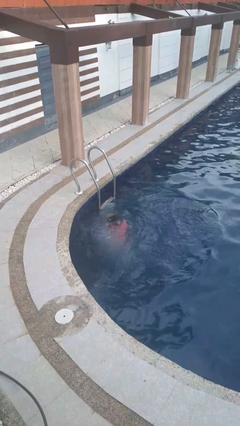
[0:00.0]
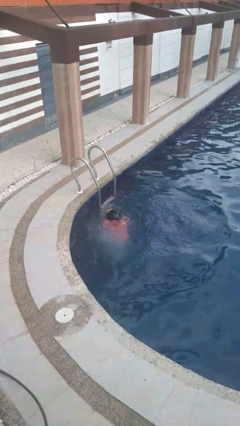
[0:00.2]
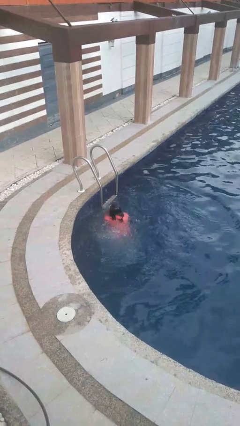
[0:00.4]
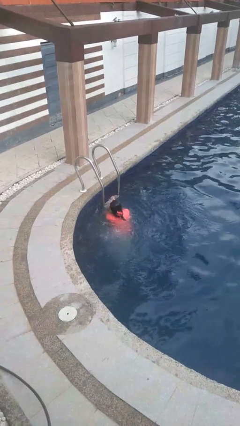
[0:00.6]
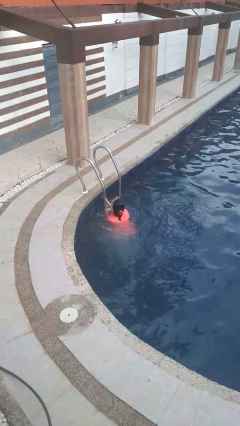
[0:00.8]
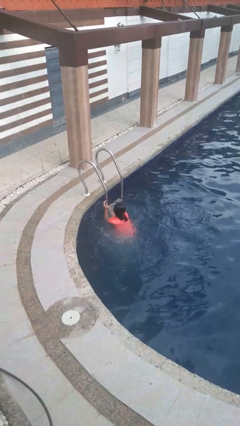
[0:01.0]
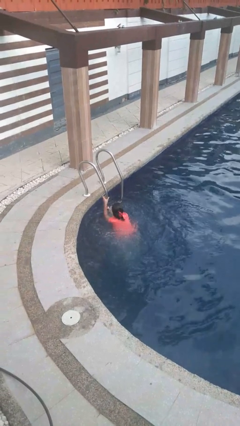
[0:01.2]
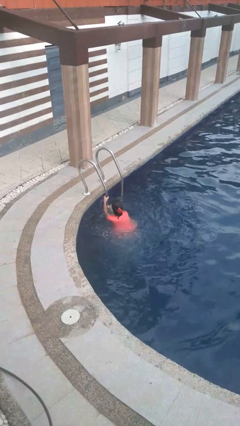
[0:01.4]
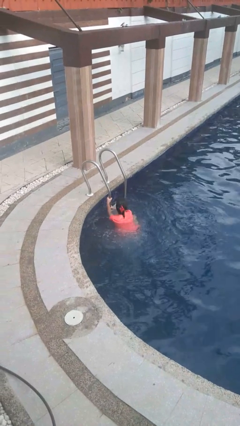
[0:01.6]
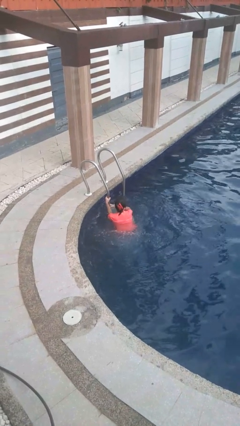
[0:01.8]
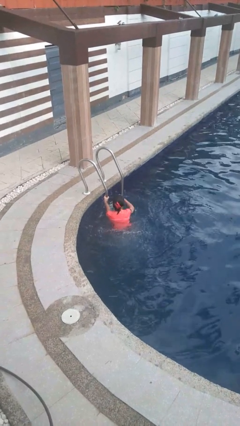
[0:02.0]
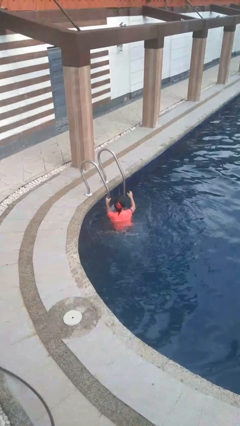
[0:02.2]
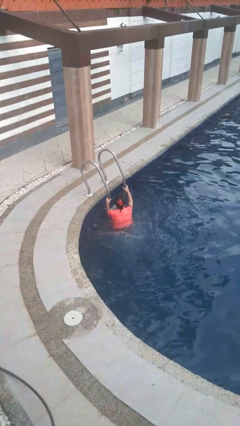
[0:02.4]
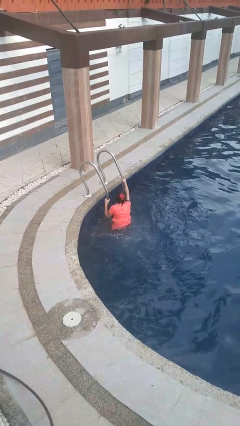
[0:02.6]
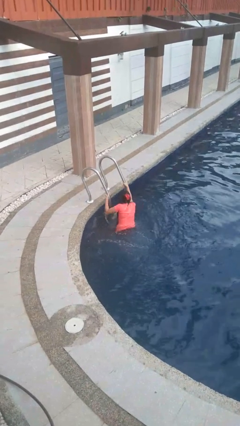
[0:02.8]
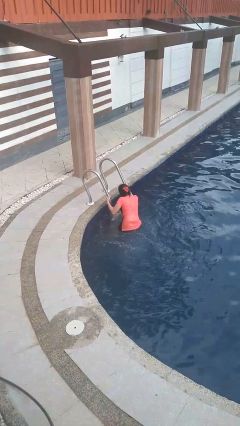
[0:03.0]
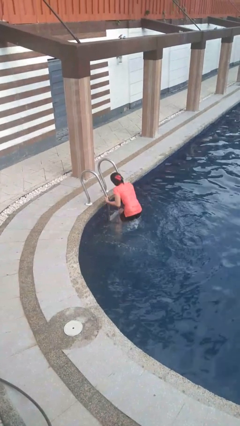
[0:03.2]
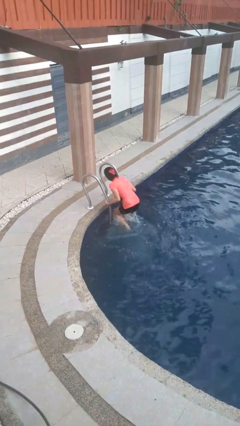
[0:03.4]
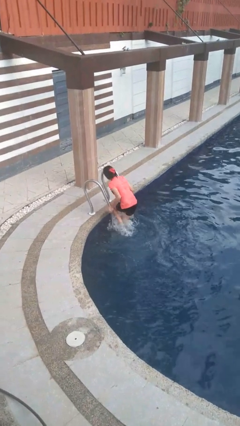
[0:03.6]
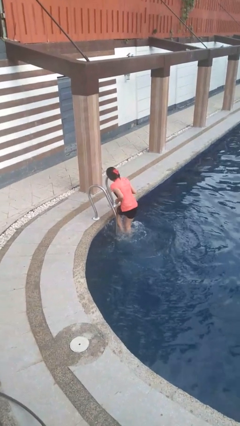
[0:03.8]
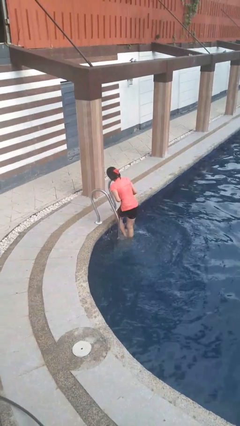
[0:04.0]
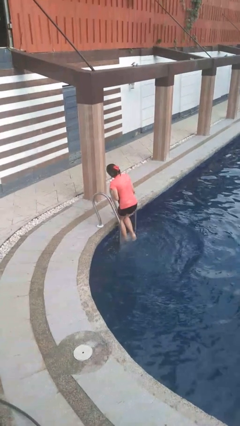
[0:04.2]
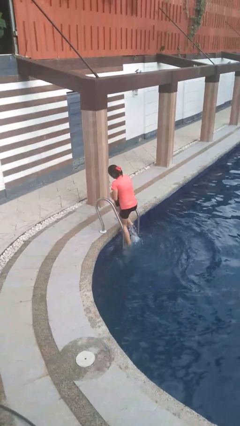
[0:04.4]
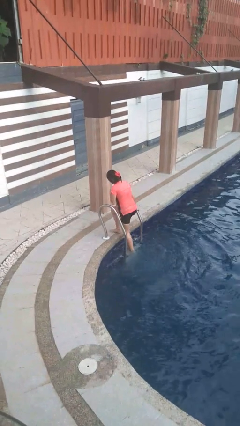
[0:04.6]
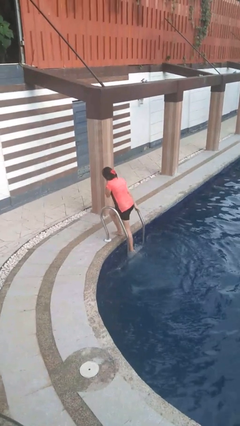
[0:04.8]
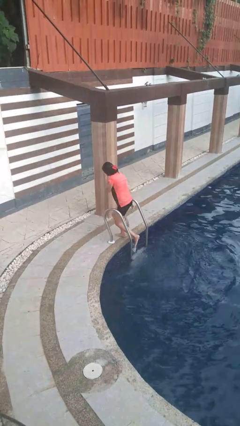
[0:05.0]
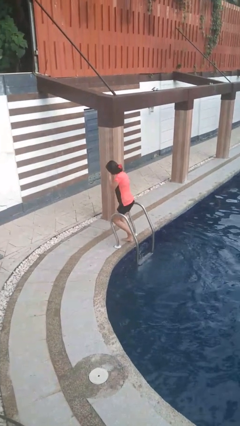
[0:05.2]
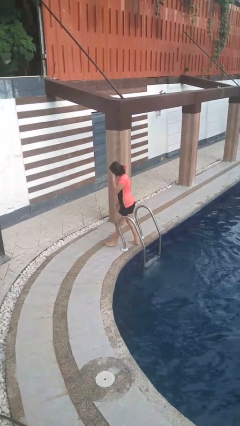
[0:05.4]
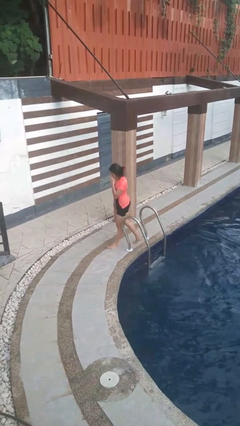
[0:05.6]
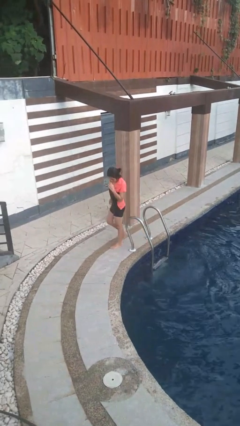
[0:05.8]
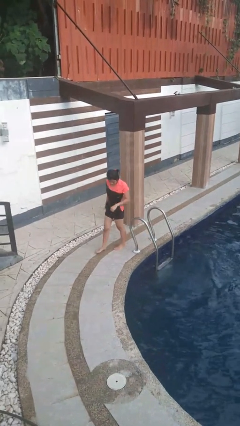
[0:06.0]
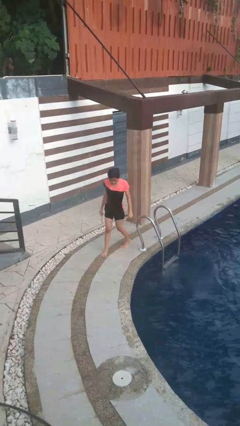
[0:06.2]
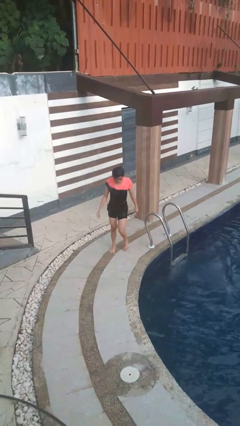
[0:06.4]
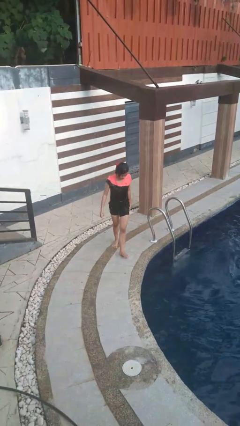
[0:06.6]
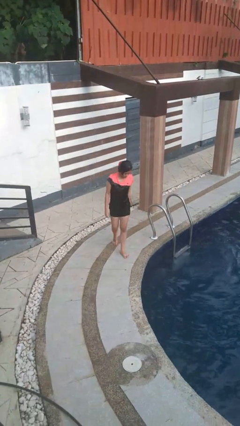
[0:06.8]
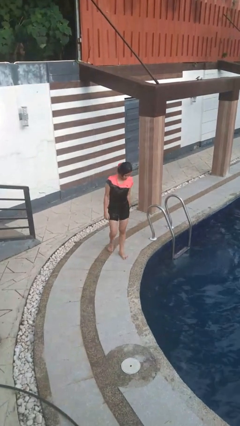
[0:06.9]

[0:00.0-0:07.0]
person exits pool

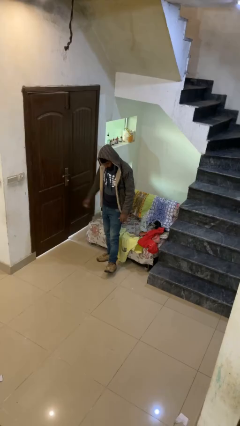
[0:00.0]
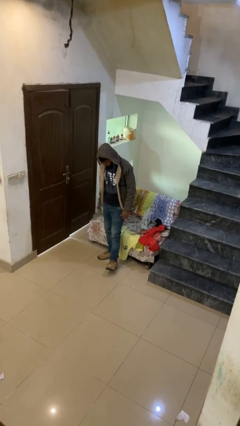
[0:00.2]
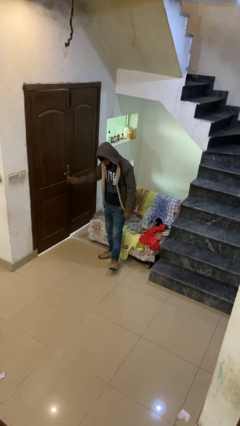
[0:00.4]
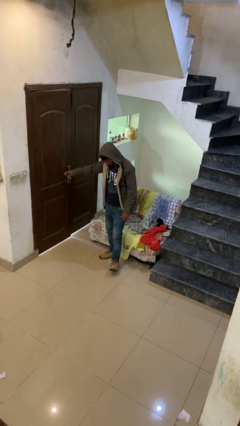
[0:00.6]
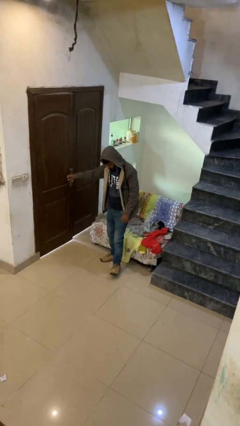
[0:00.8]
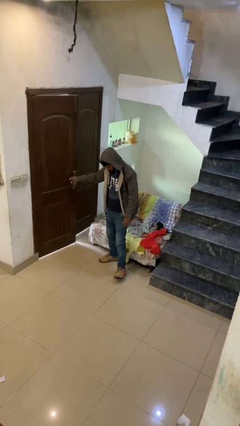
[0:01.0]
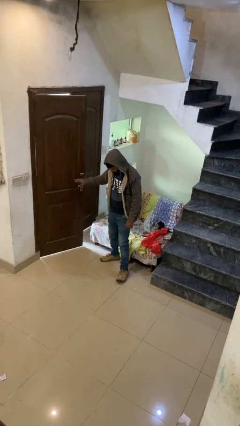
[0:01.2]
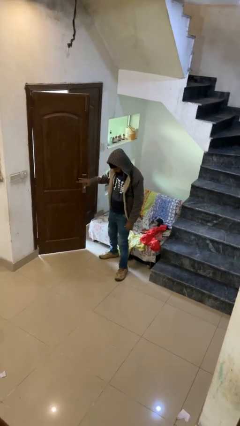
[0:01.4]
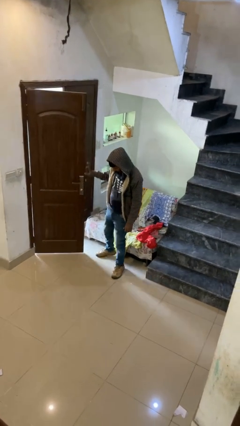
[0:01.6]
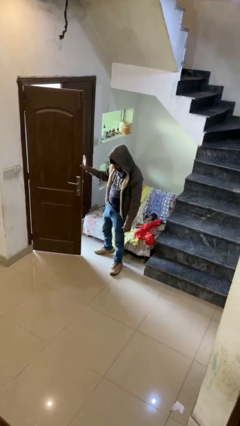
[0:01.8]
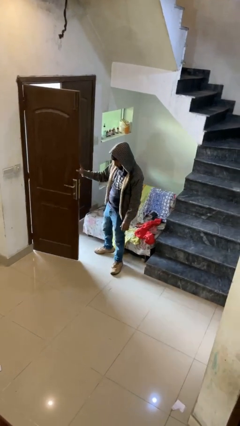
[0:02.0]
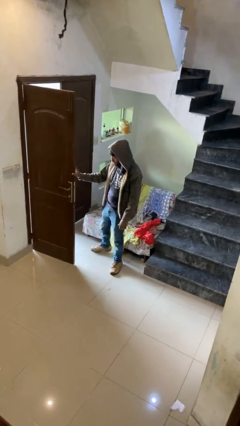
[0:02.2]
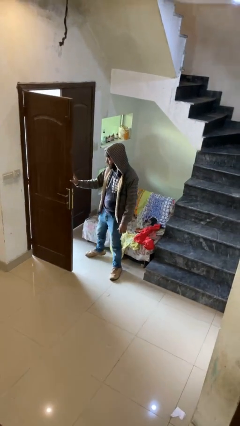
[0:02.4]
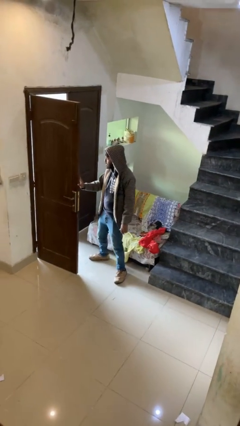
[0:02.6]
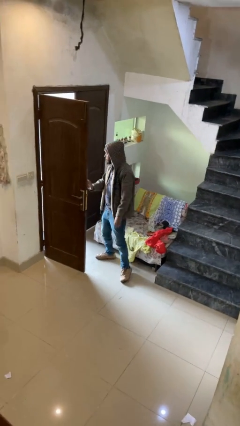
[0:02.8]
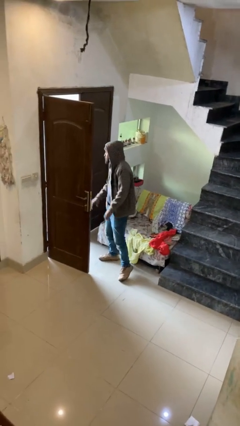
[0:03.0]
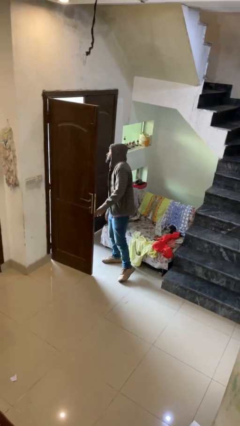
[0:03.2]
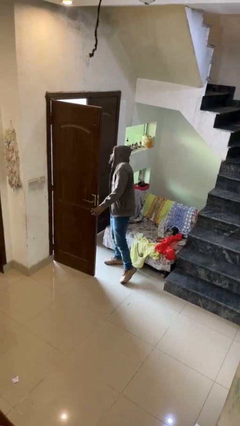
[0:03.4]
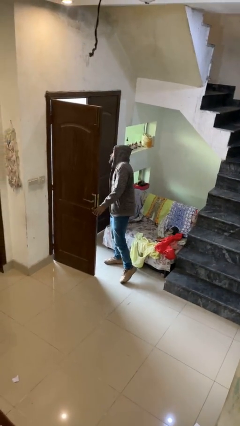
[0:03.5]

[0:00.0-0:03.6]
person opens facility door

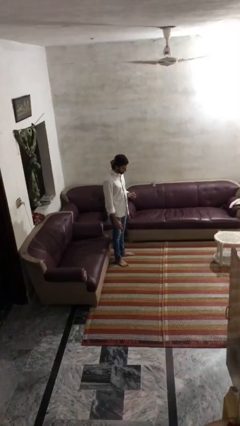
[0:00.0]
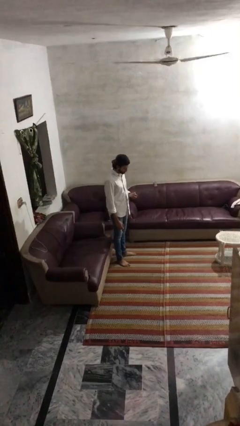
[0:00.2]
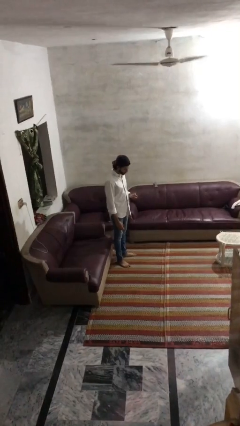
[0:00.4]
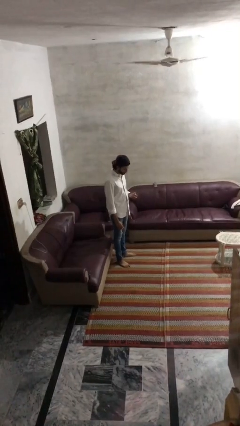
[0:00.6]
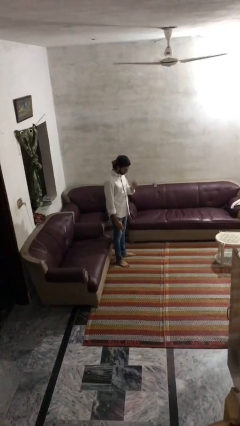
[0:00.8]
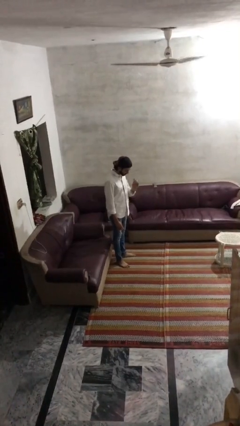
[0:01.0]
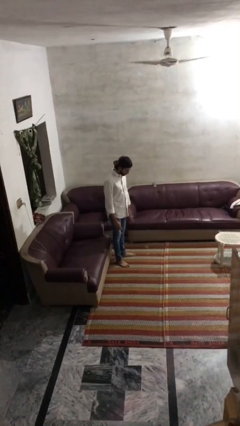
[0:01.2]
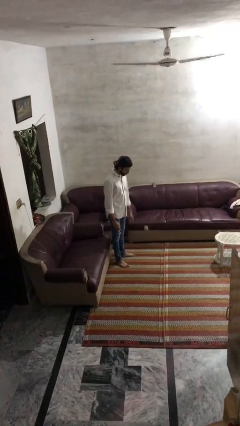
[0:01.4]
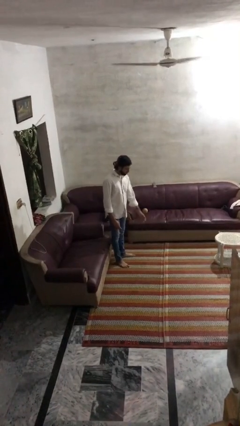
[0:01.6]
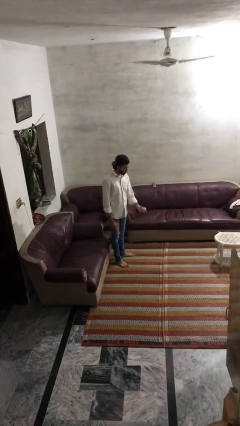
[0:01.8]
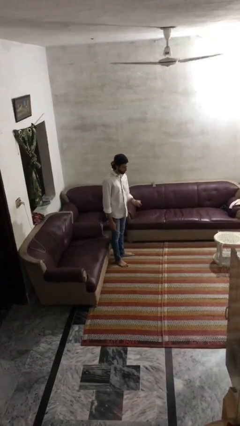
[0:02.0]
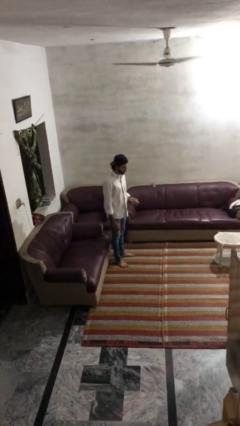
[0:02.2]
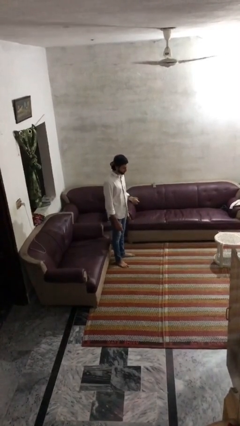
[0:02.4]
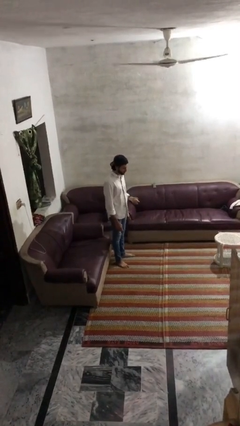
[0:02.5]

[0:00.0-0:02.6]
person bounces ball on floor

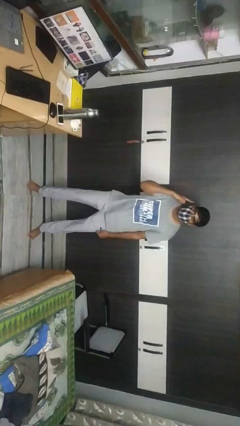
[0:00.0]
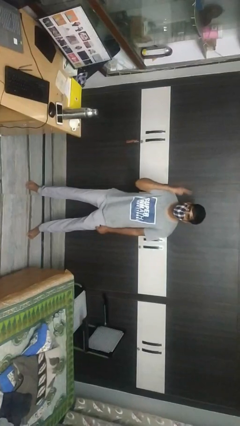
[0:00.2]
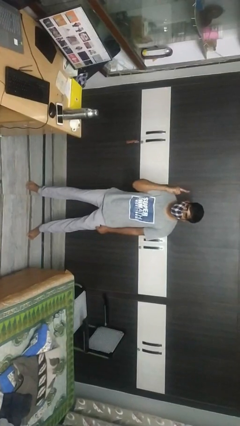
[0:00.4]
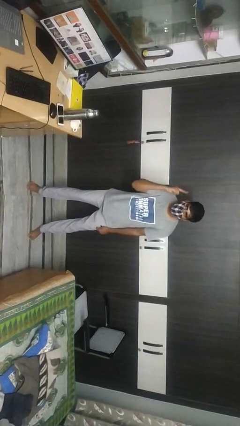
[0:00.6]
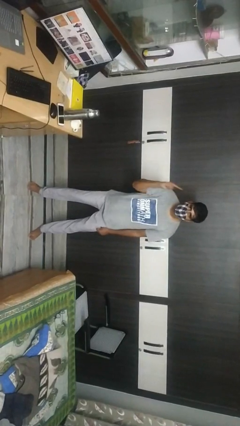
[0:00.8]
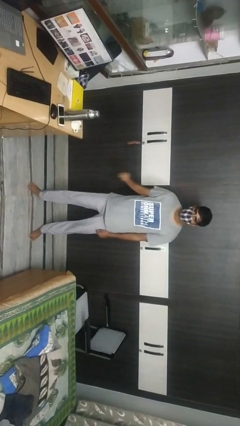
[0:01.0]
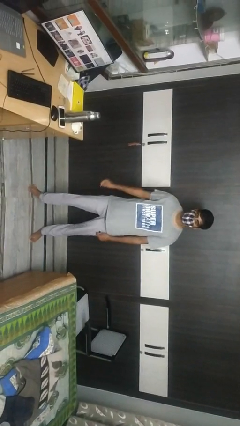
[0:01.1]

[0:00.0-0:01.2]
person gestures listen closely

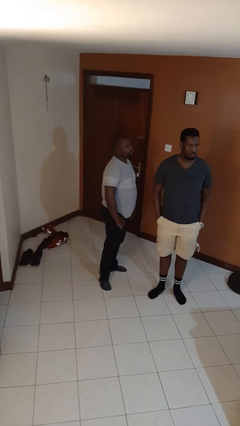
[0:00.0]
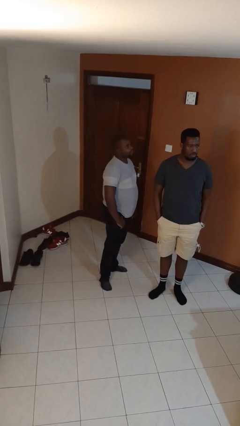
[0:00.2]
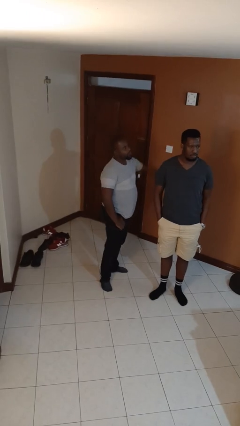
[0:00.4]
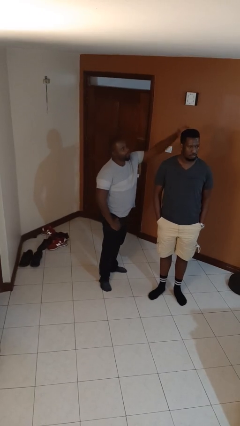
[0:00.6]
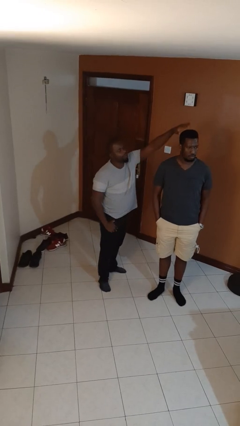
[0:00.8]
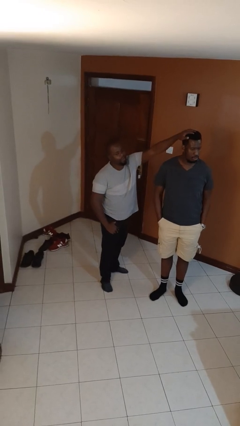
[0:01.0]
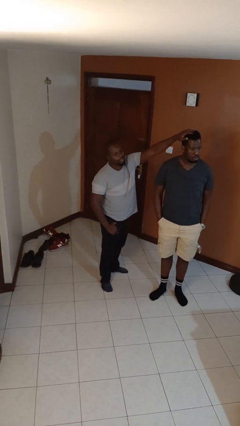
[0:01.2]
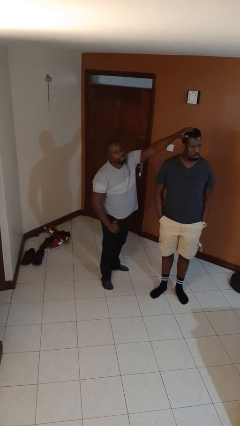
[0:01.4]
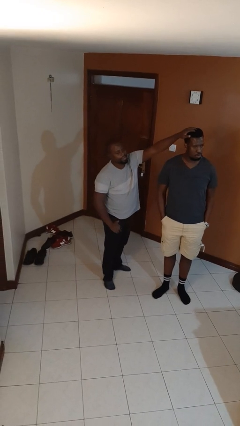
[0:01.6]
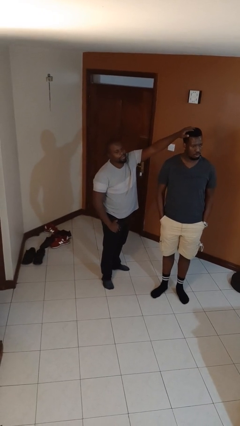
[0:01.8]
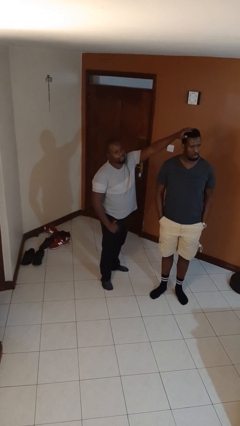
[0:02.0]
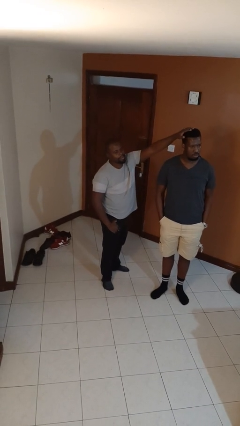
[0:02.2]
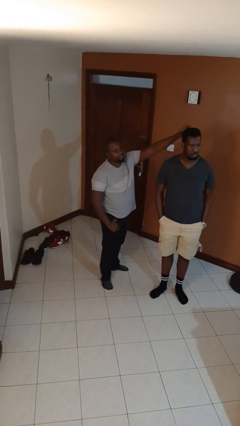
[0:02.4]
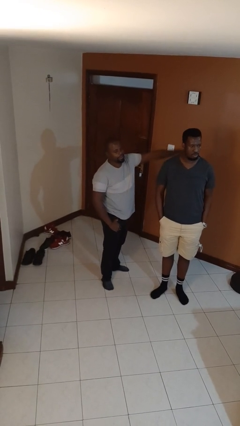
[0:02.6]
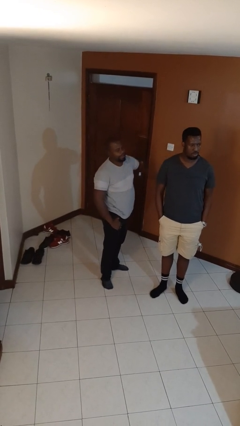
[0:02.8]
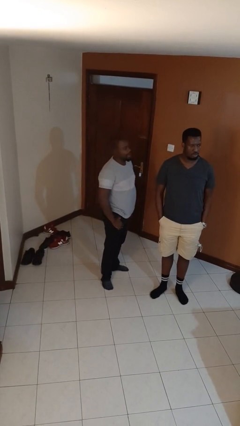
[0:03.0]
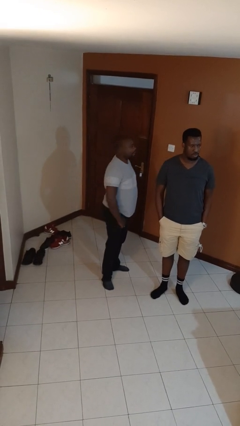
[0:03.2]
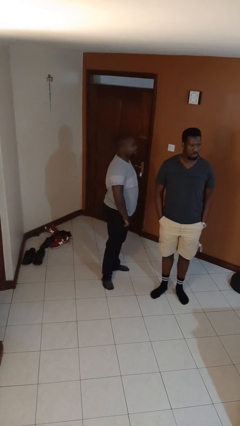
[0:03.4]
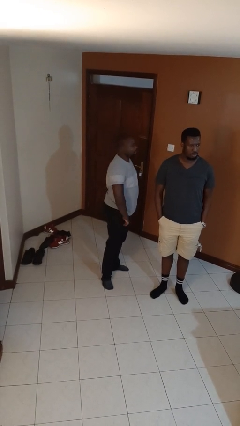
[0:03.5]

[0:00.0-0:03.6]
person grabs person by hair
